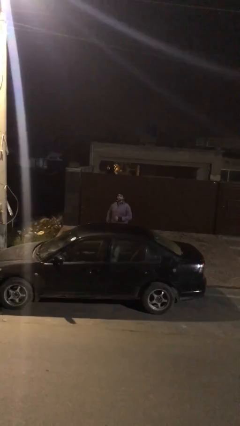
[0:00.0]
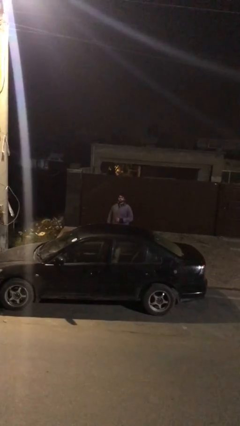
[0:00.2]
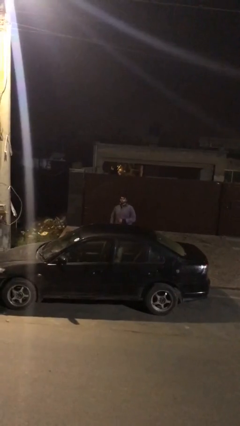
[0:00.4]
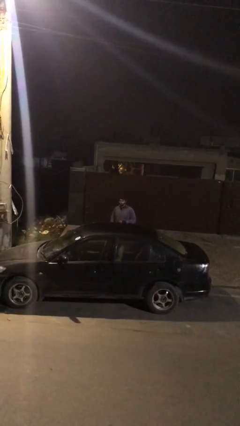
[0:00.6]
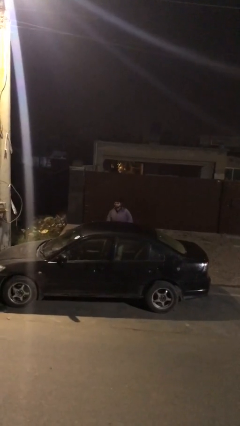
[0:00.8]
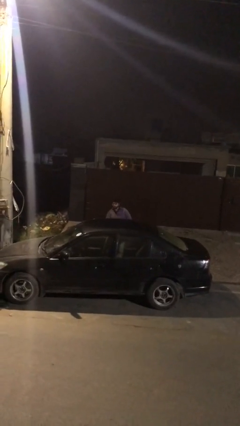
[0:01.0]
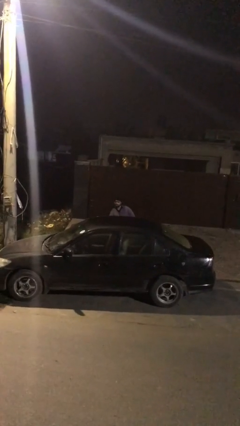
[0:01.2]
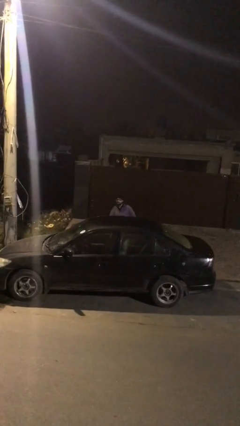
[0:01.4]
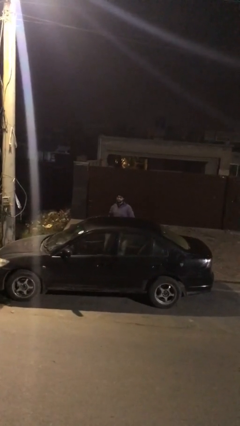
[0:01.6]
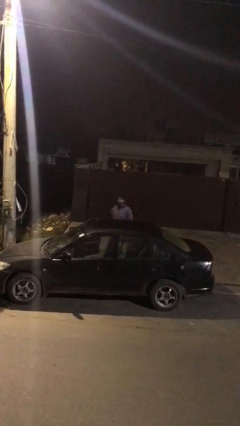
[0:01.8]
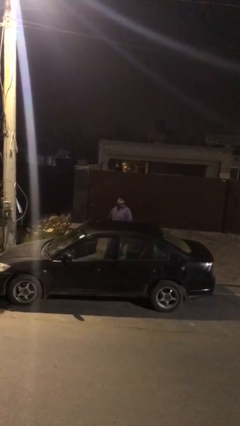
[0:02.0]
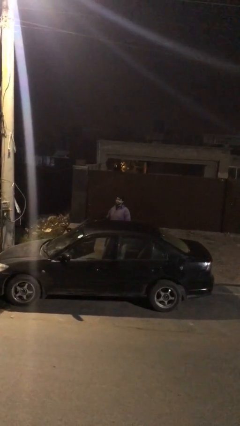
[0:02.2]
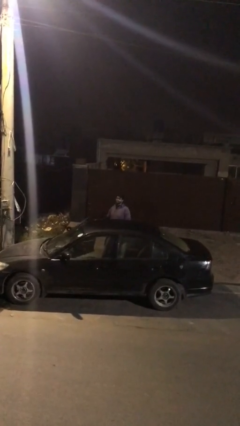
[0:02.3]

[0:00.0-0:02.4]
person opens car door

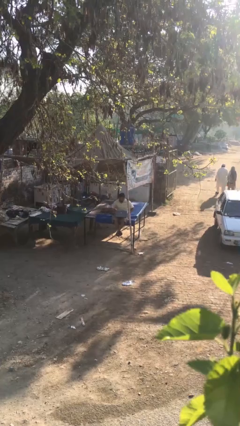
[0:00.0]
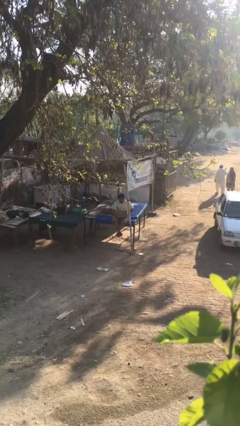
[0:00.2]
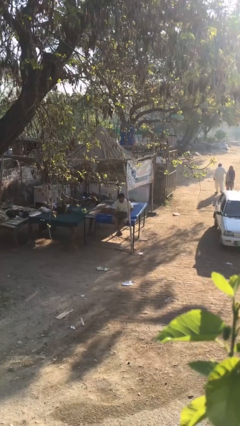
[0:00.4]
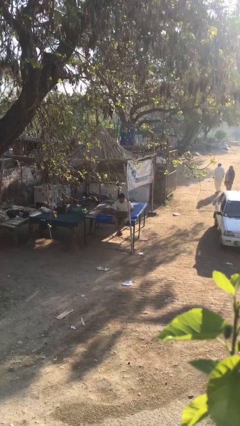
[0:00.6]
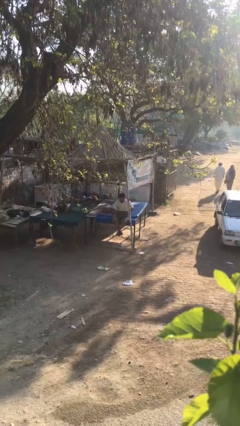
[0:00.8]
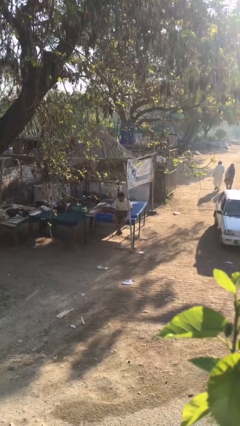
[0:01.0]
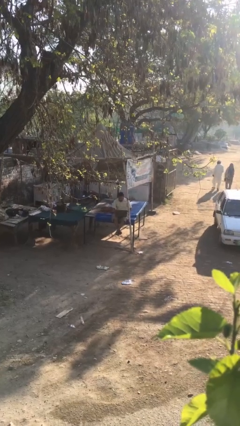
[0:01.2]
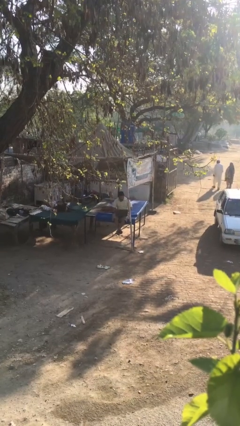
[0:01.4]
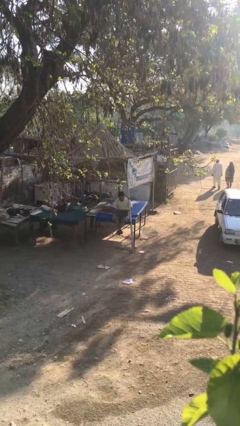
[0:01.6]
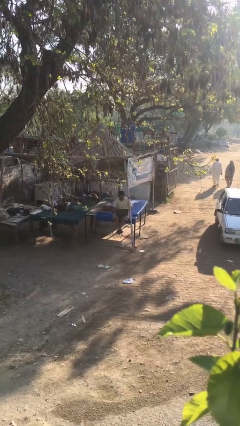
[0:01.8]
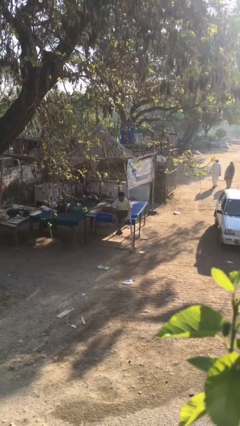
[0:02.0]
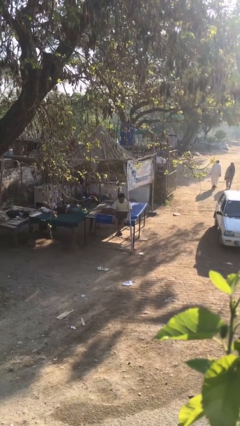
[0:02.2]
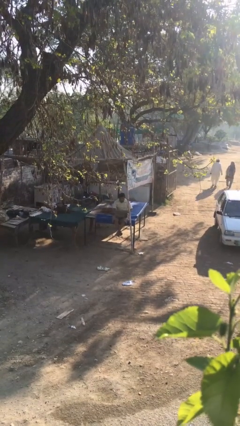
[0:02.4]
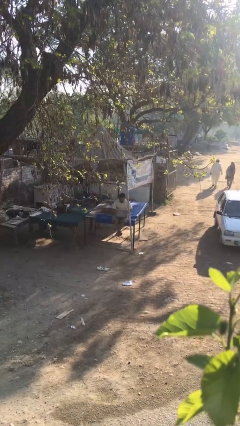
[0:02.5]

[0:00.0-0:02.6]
person interacts with laptop

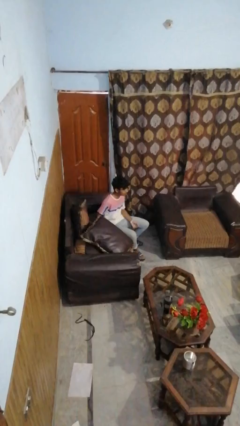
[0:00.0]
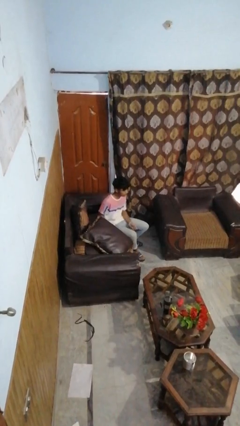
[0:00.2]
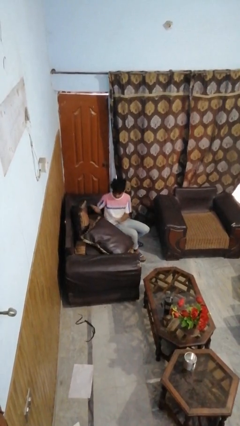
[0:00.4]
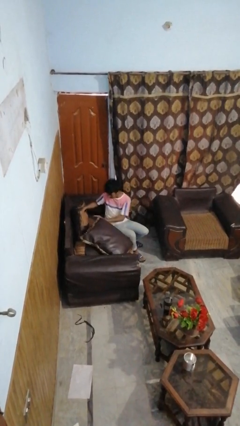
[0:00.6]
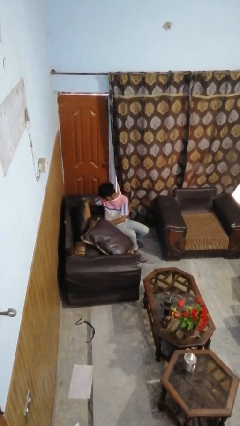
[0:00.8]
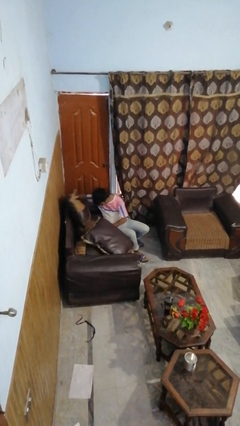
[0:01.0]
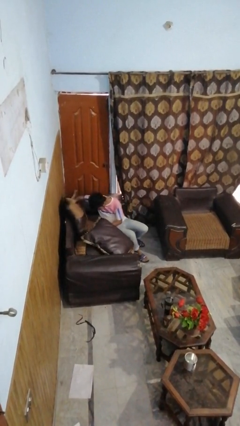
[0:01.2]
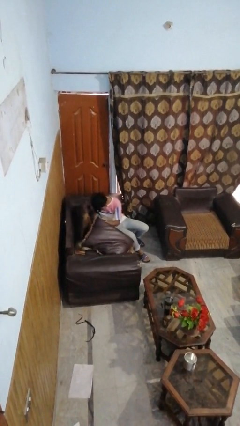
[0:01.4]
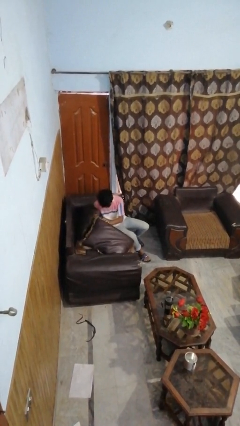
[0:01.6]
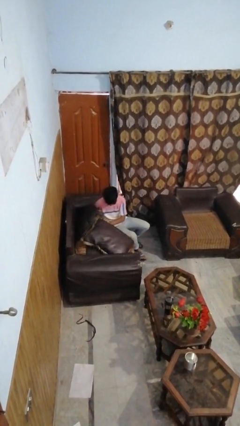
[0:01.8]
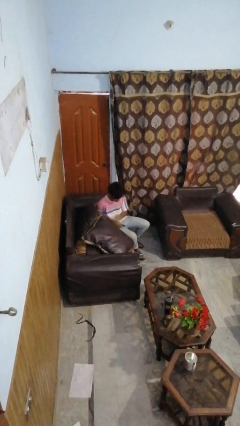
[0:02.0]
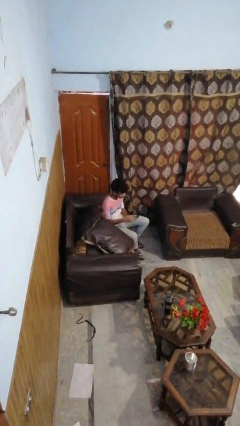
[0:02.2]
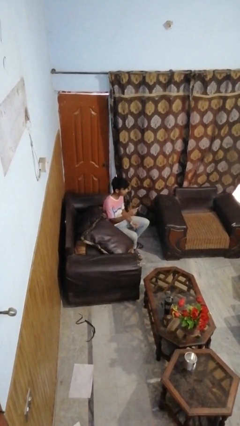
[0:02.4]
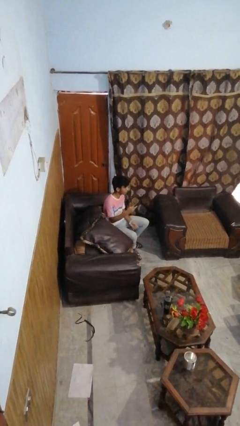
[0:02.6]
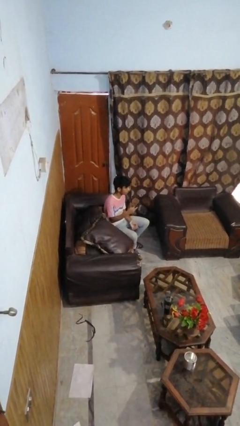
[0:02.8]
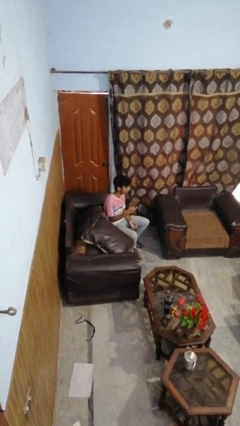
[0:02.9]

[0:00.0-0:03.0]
person searches in couch

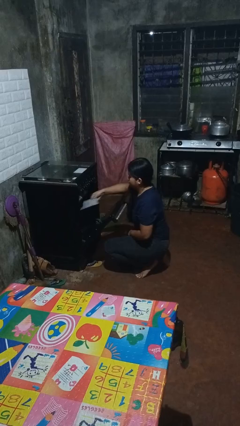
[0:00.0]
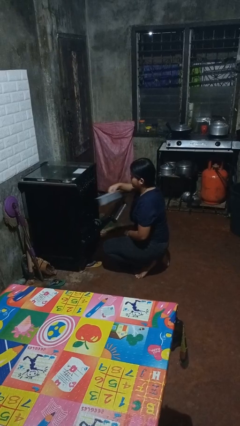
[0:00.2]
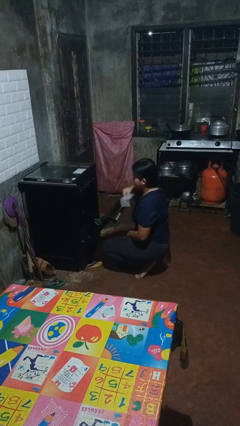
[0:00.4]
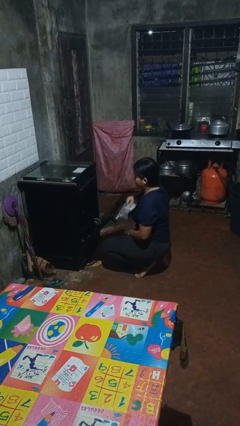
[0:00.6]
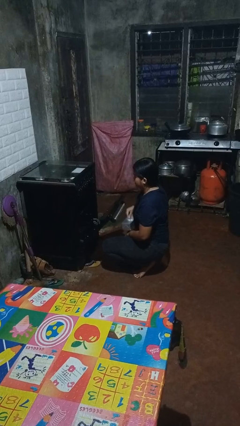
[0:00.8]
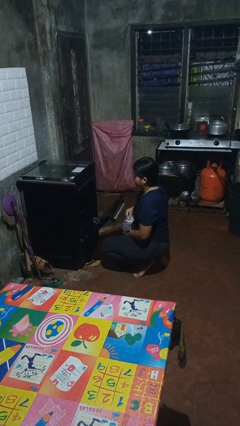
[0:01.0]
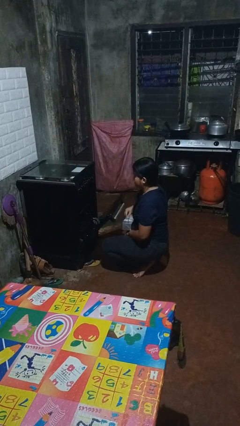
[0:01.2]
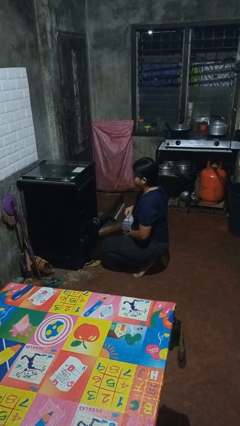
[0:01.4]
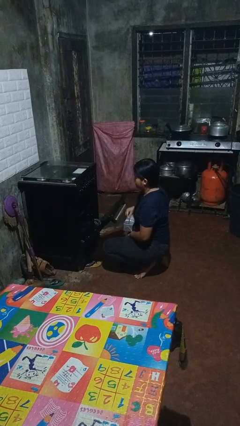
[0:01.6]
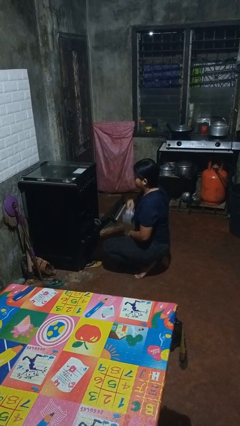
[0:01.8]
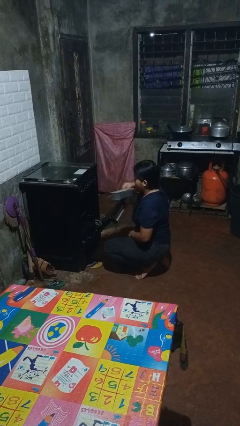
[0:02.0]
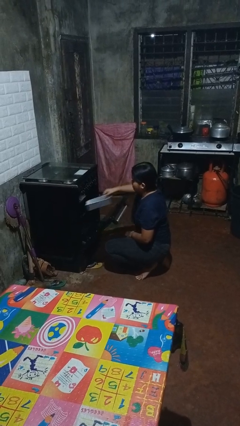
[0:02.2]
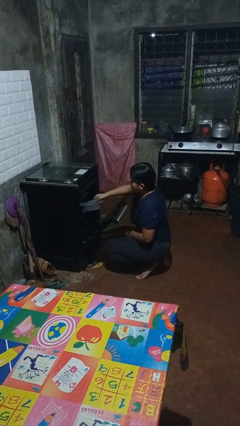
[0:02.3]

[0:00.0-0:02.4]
person takes object from oven

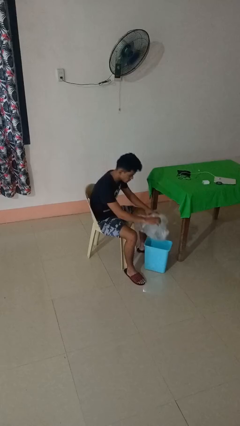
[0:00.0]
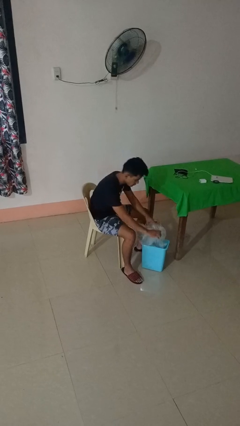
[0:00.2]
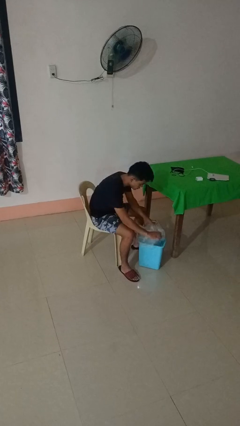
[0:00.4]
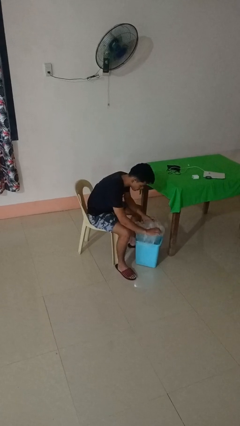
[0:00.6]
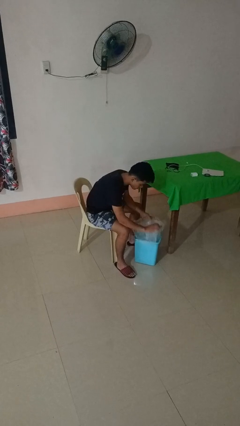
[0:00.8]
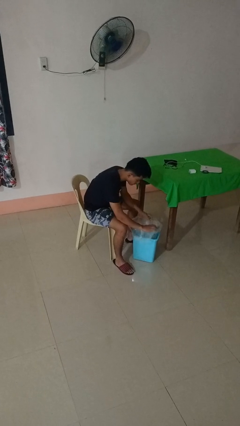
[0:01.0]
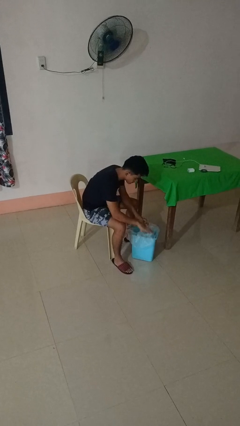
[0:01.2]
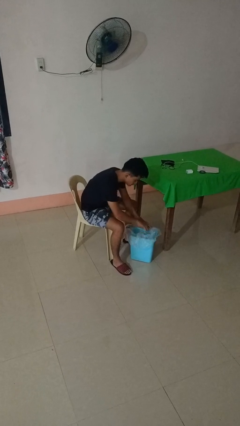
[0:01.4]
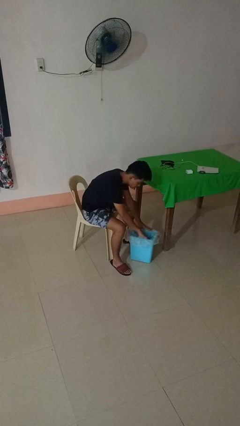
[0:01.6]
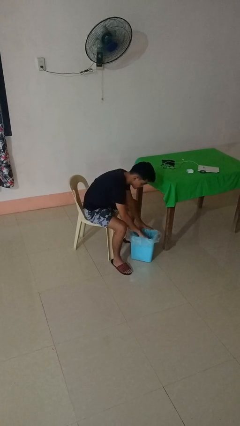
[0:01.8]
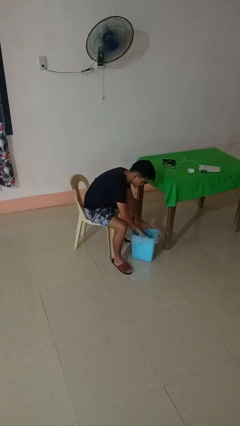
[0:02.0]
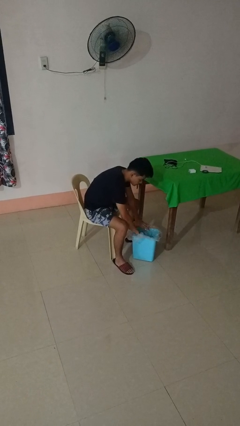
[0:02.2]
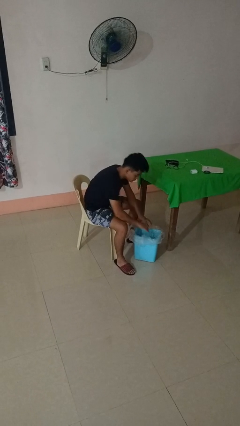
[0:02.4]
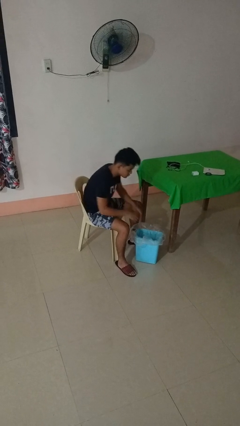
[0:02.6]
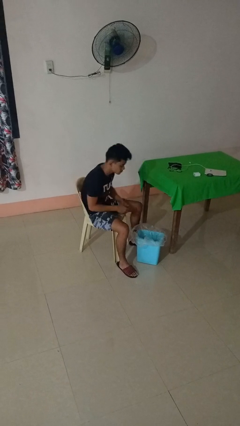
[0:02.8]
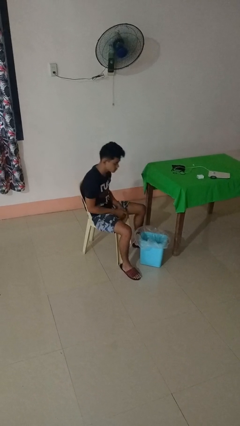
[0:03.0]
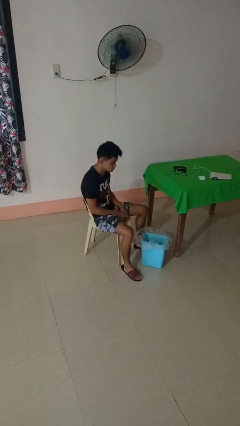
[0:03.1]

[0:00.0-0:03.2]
person inserts trashbag into trashcan

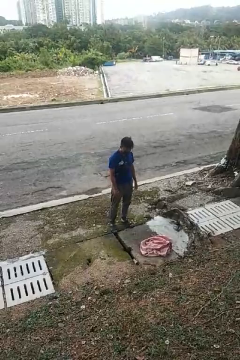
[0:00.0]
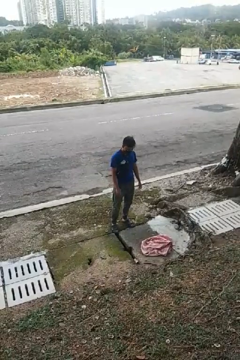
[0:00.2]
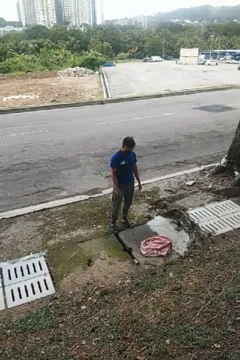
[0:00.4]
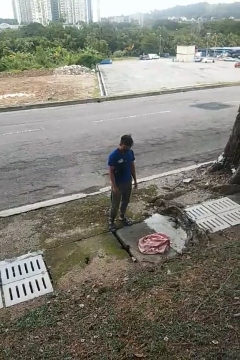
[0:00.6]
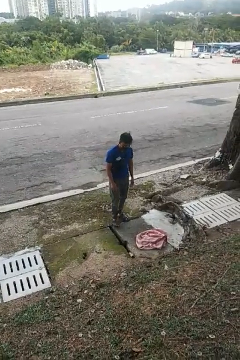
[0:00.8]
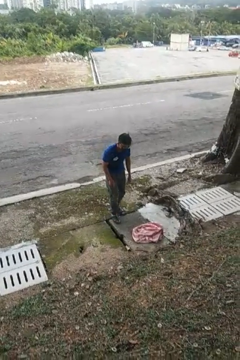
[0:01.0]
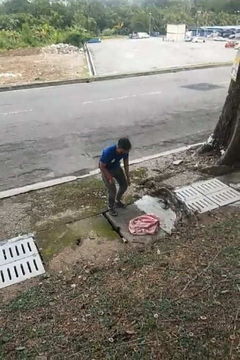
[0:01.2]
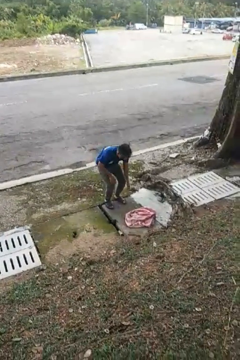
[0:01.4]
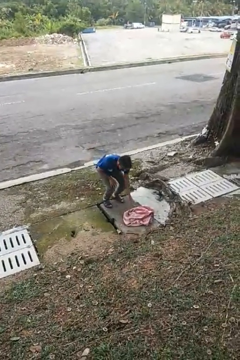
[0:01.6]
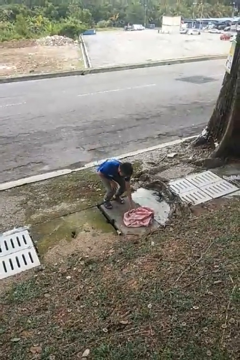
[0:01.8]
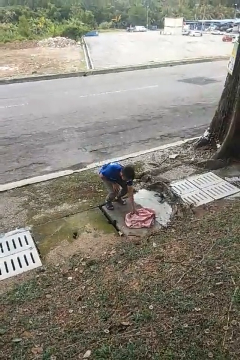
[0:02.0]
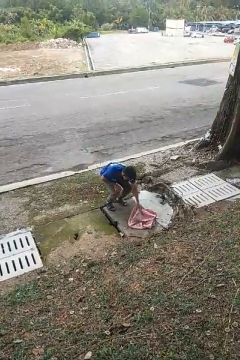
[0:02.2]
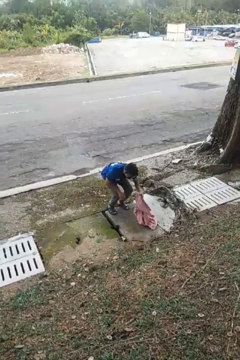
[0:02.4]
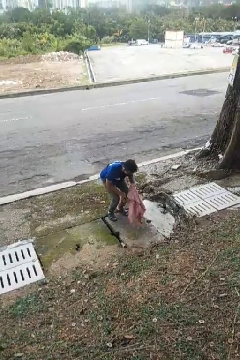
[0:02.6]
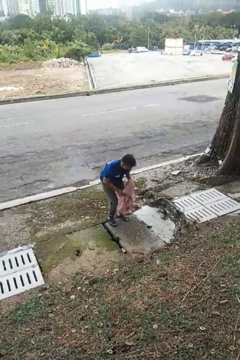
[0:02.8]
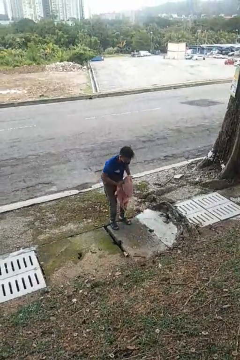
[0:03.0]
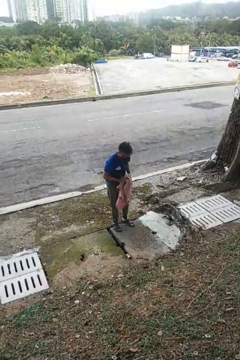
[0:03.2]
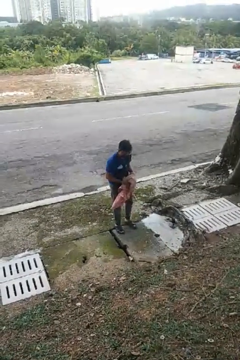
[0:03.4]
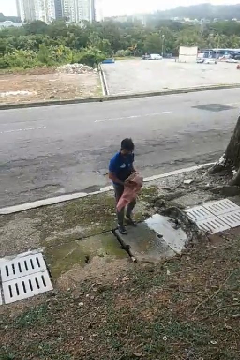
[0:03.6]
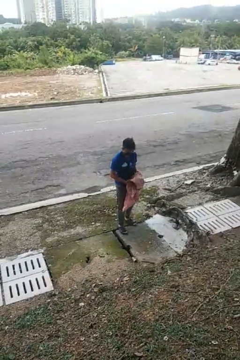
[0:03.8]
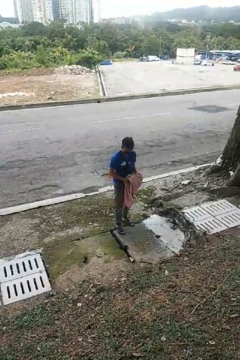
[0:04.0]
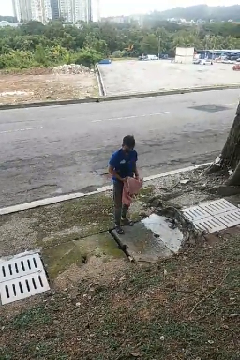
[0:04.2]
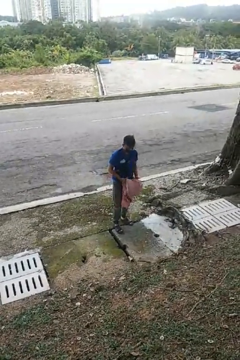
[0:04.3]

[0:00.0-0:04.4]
person picks up object from floor

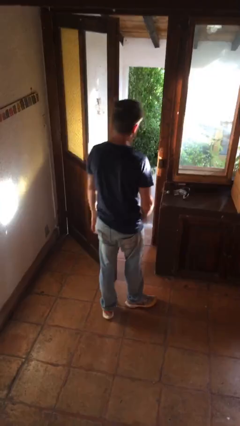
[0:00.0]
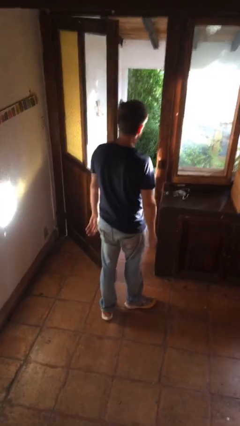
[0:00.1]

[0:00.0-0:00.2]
person closes door with hip
